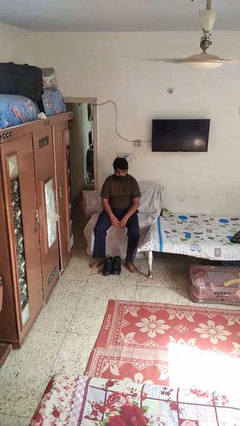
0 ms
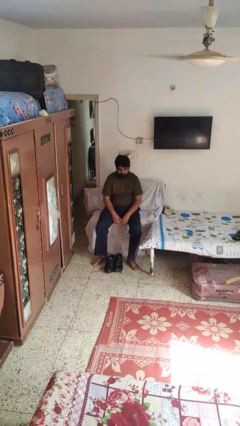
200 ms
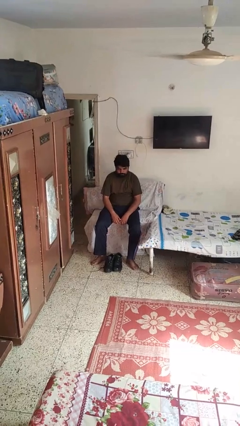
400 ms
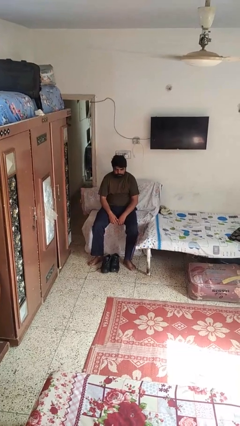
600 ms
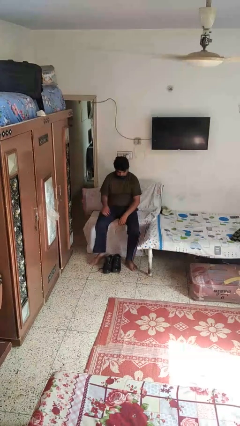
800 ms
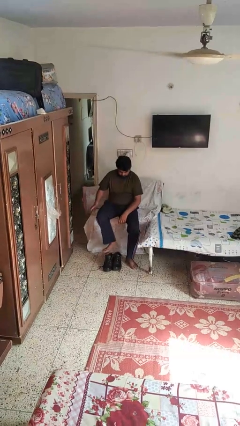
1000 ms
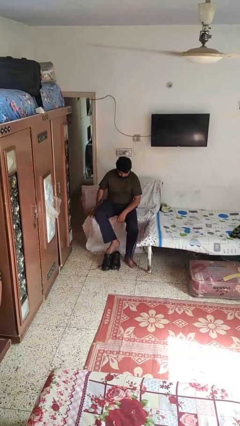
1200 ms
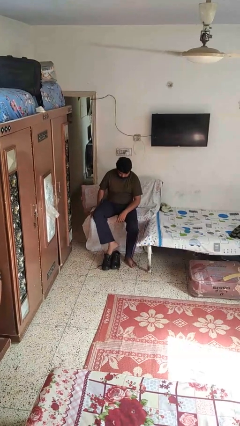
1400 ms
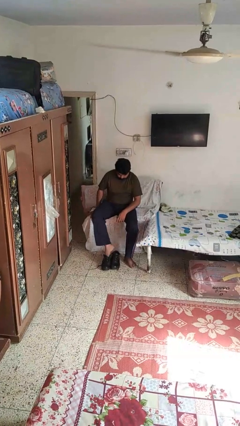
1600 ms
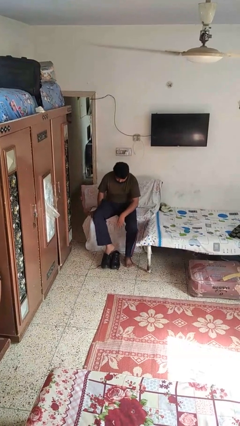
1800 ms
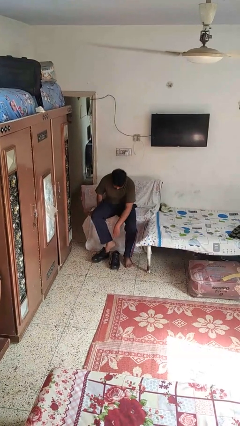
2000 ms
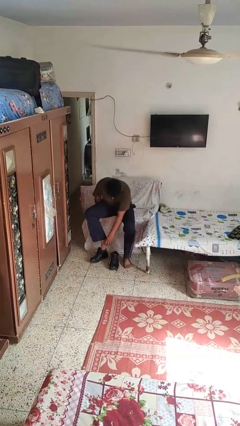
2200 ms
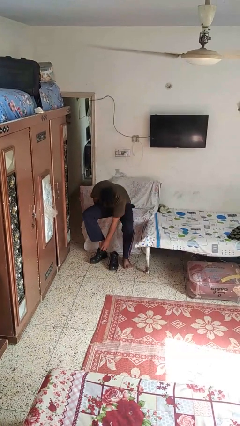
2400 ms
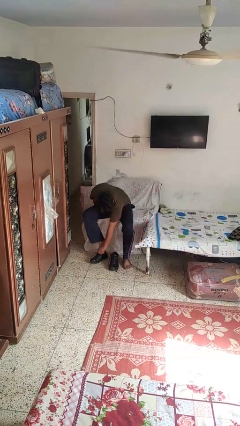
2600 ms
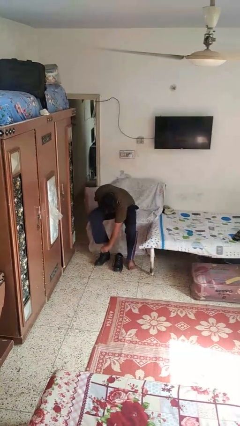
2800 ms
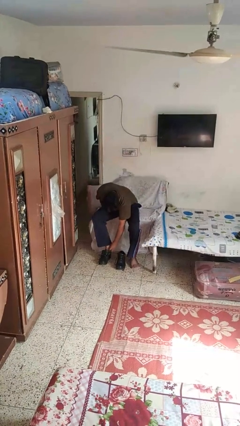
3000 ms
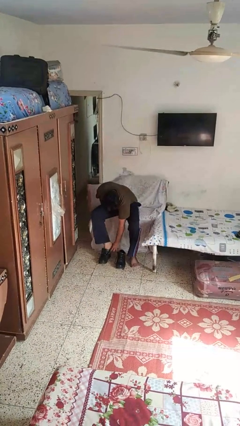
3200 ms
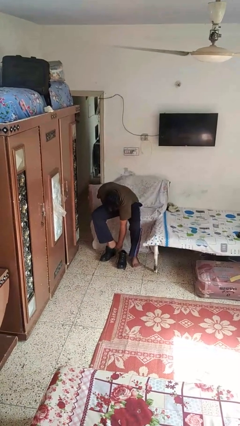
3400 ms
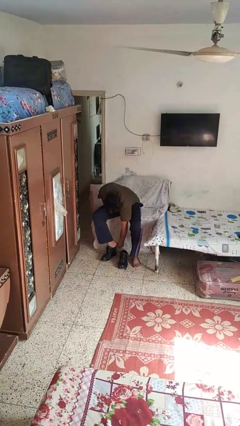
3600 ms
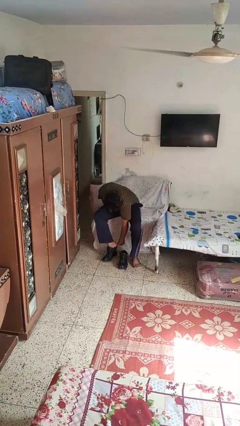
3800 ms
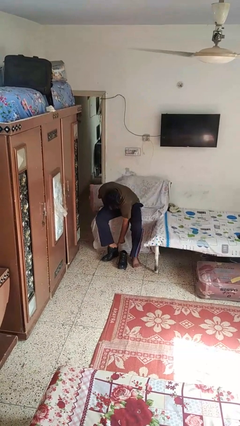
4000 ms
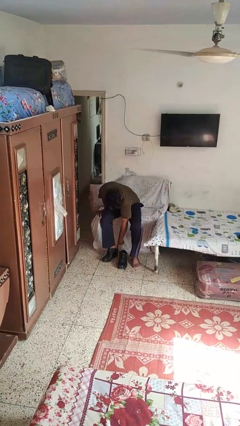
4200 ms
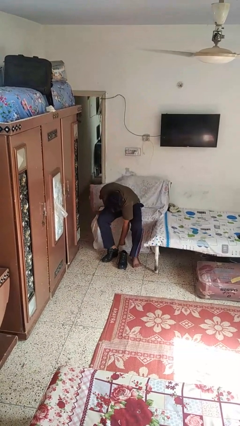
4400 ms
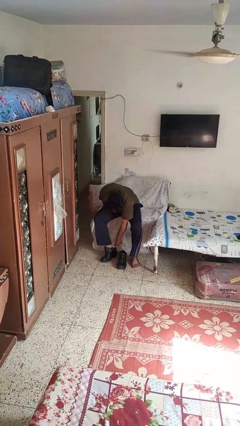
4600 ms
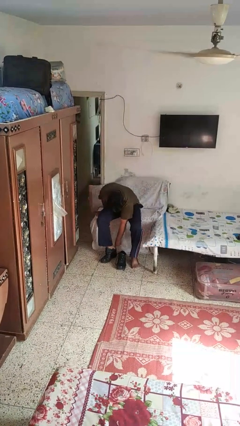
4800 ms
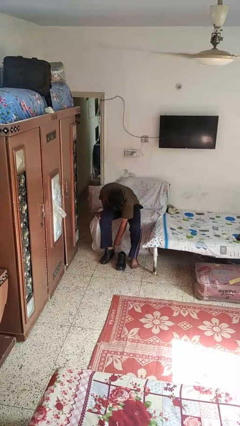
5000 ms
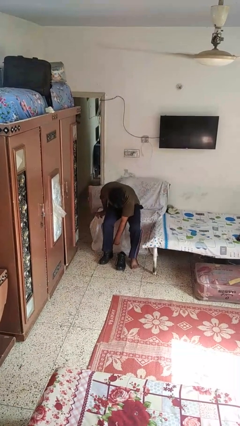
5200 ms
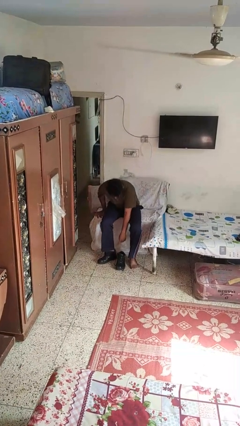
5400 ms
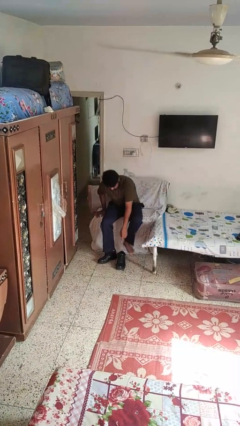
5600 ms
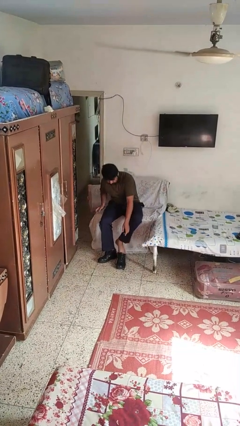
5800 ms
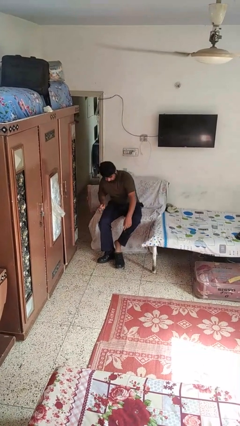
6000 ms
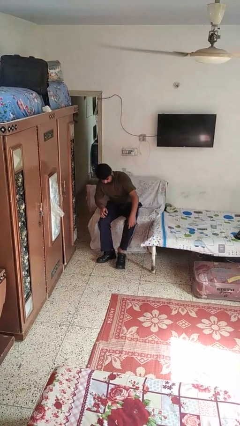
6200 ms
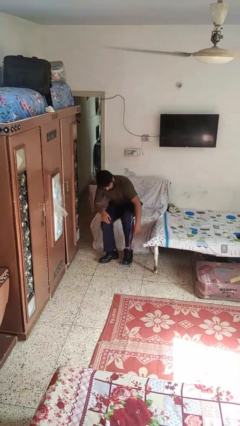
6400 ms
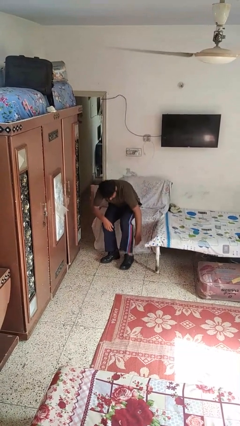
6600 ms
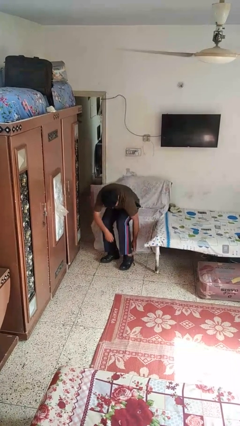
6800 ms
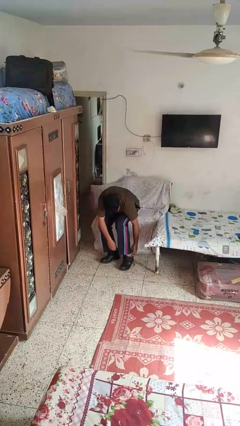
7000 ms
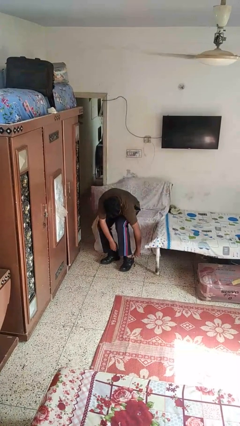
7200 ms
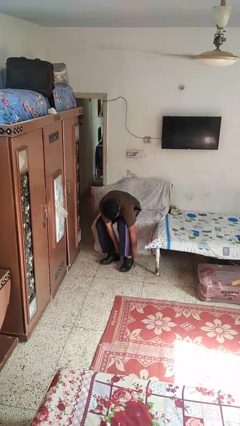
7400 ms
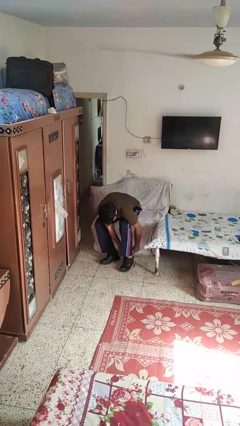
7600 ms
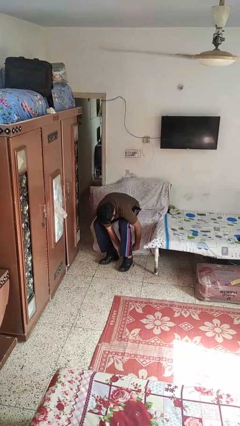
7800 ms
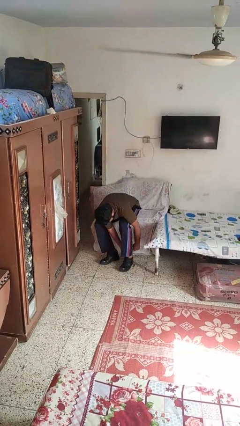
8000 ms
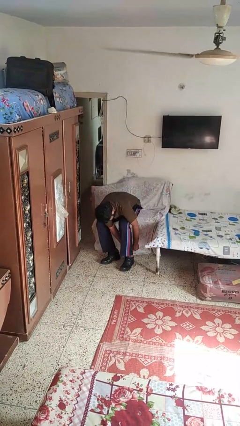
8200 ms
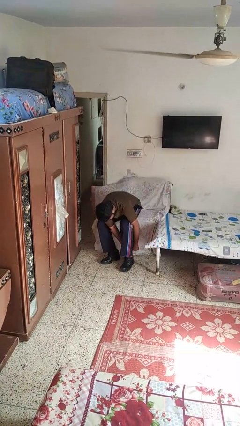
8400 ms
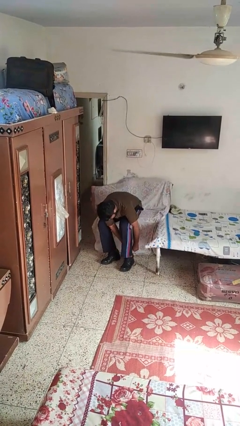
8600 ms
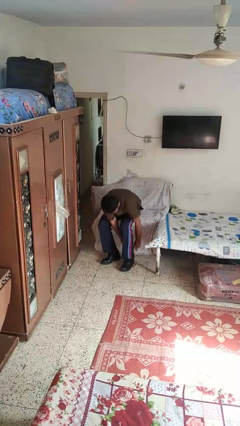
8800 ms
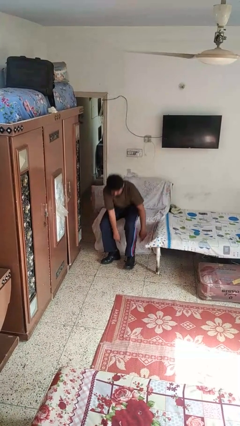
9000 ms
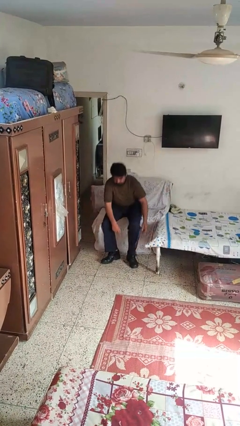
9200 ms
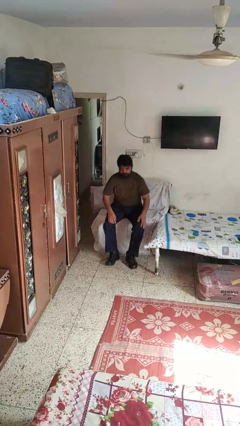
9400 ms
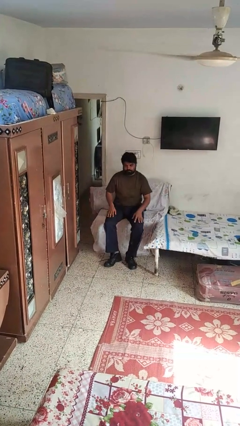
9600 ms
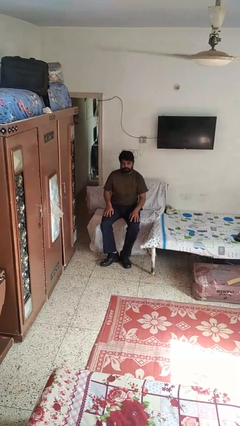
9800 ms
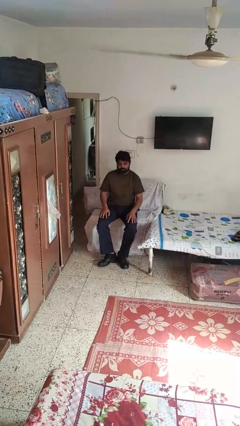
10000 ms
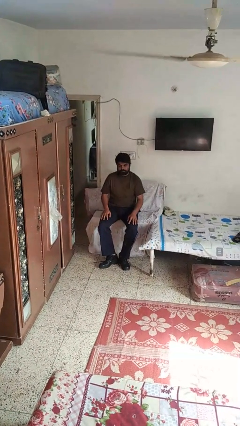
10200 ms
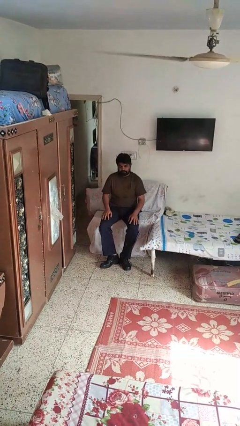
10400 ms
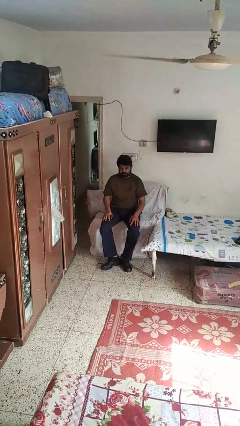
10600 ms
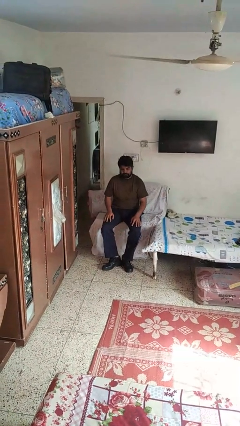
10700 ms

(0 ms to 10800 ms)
person puts on boots

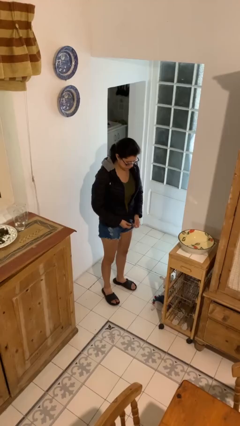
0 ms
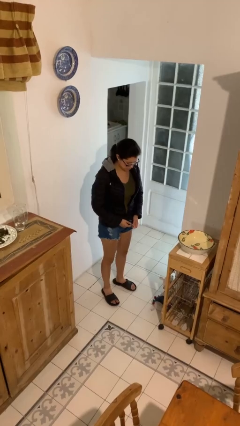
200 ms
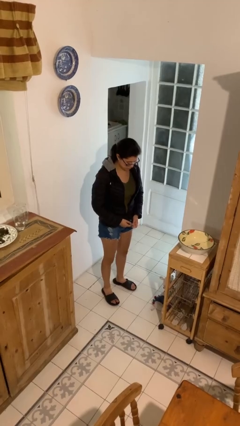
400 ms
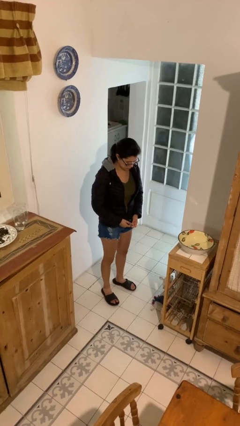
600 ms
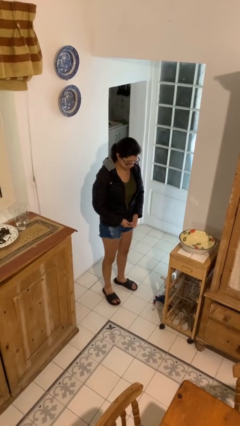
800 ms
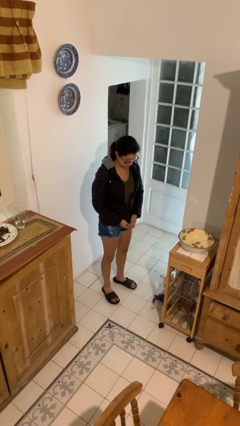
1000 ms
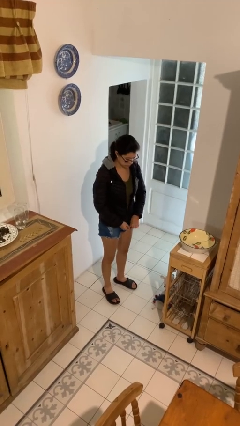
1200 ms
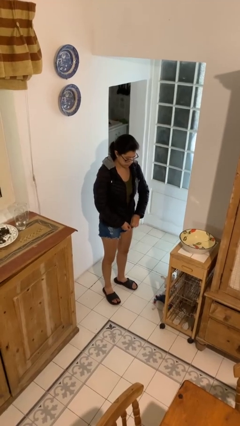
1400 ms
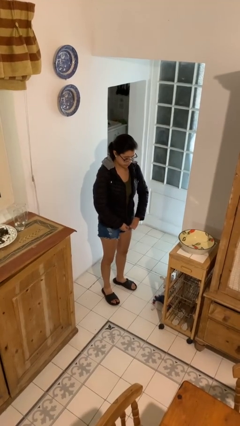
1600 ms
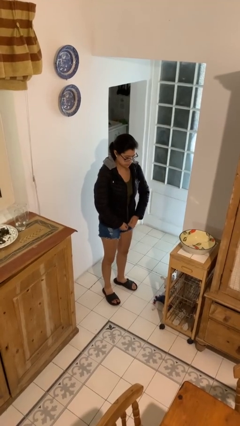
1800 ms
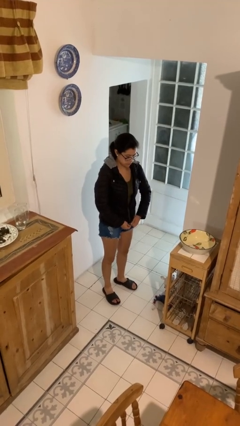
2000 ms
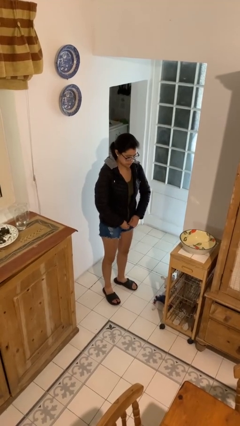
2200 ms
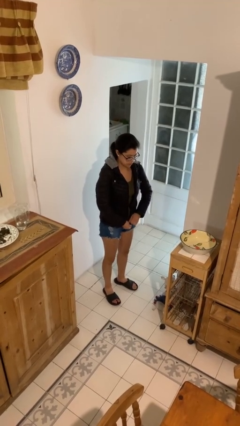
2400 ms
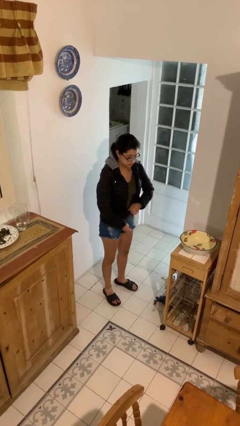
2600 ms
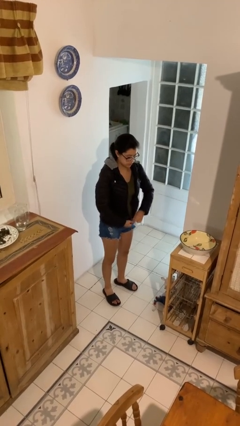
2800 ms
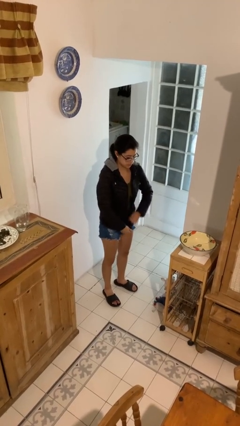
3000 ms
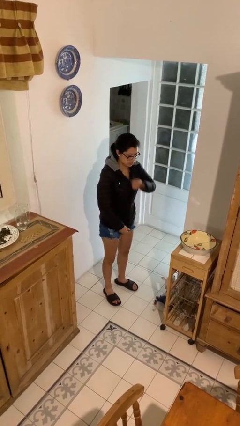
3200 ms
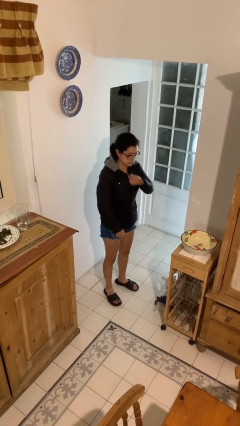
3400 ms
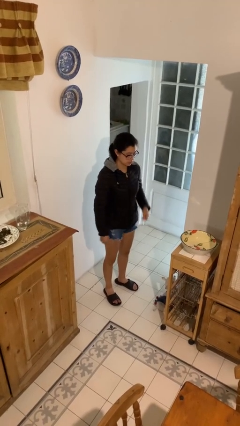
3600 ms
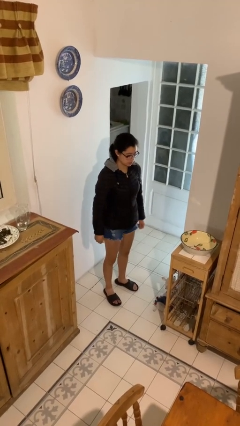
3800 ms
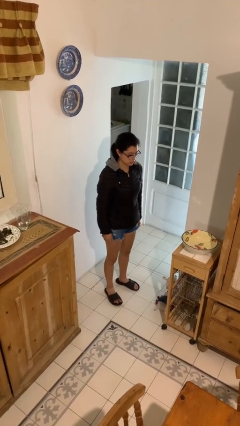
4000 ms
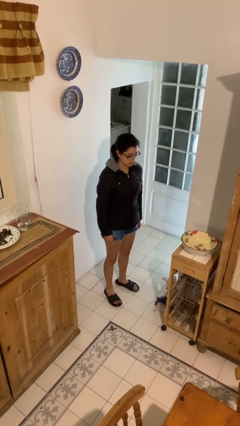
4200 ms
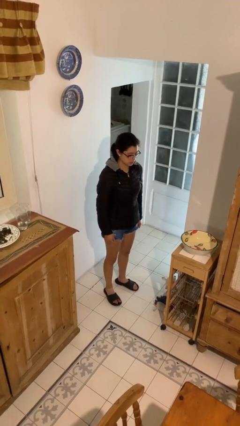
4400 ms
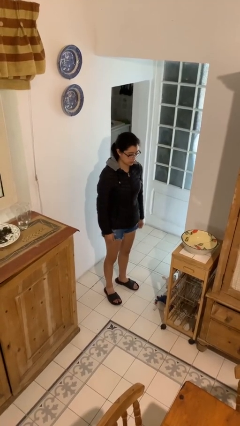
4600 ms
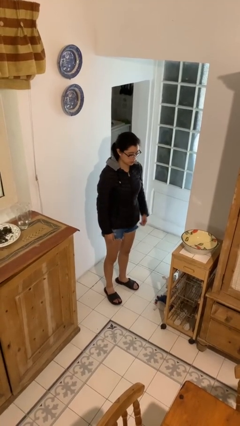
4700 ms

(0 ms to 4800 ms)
person zips up jacket

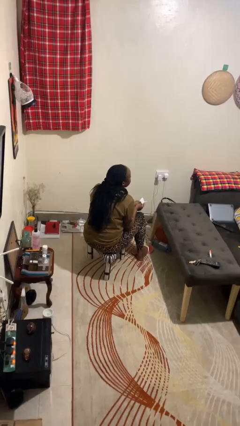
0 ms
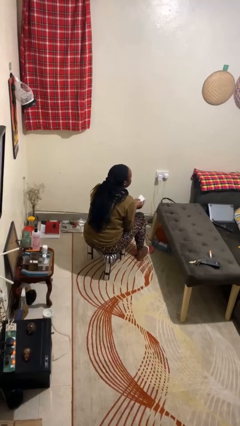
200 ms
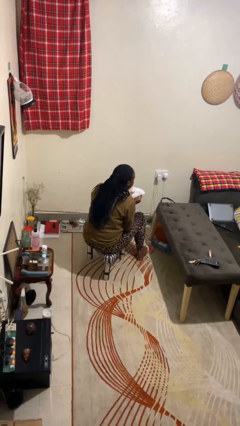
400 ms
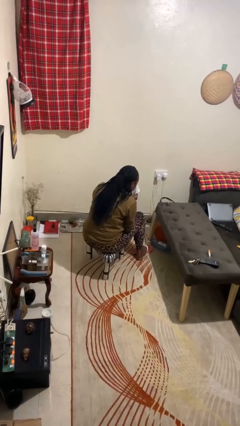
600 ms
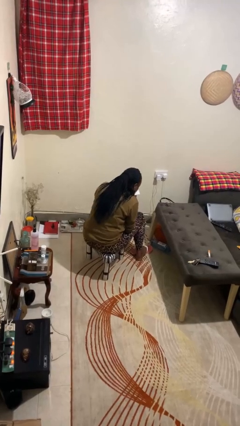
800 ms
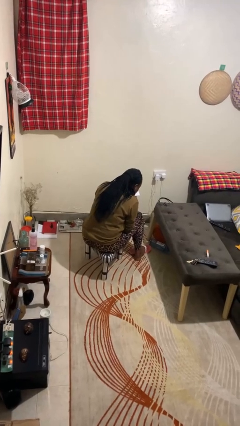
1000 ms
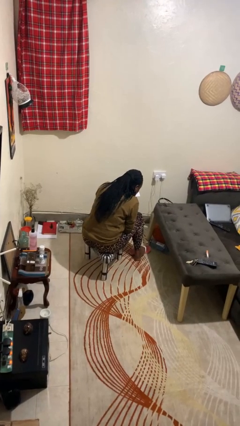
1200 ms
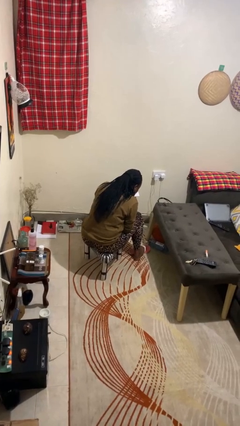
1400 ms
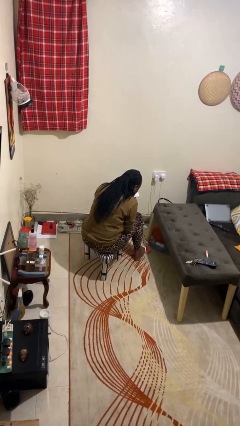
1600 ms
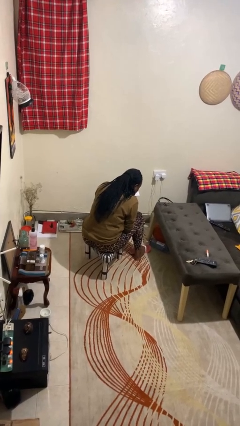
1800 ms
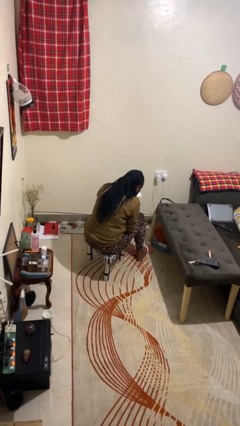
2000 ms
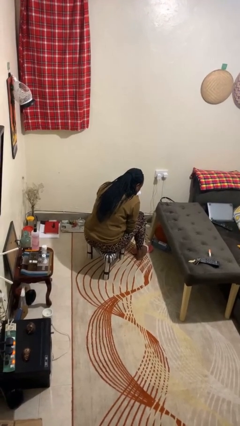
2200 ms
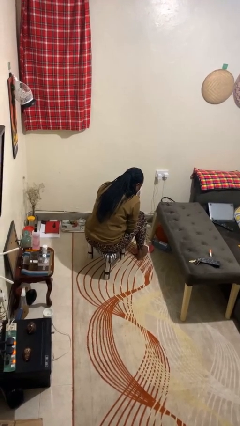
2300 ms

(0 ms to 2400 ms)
person blows nose
